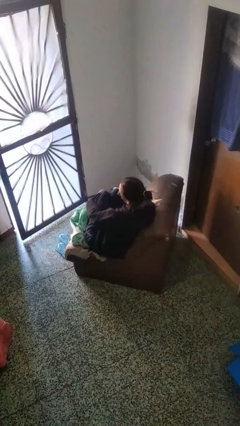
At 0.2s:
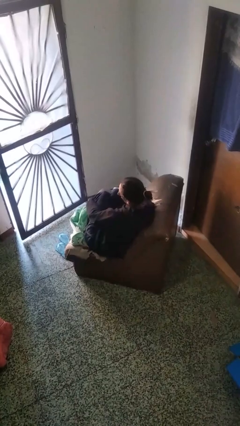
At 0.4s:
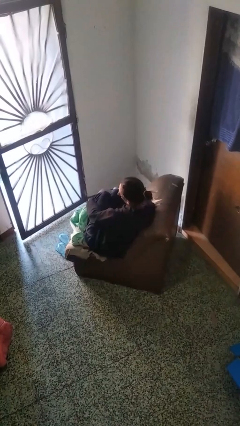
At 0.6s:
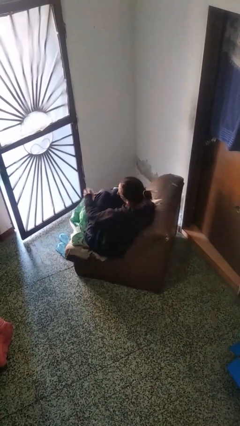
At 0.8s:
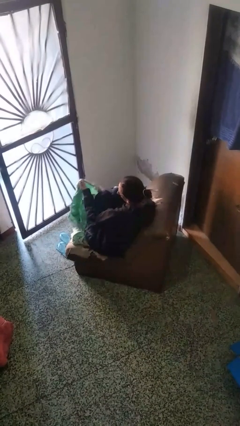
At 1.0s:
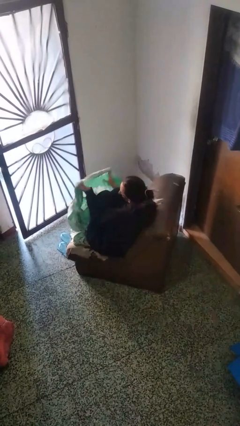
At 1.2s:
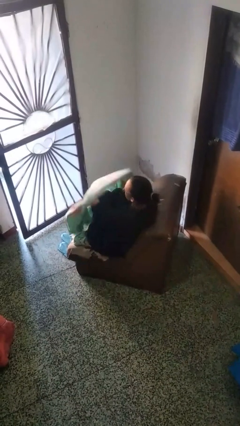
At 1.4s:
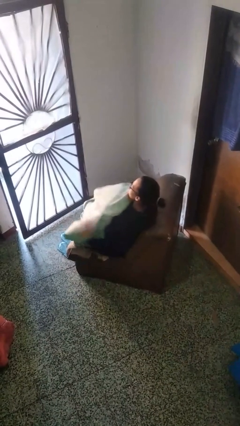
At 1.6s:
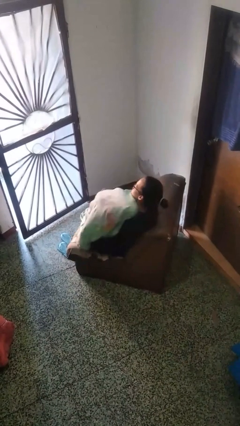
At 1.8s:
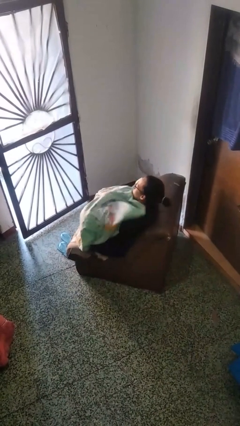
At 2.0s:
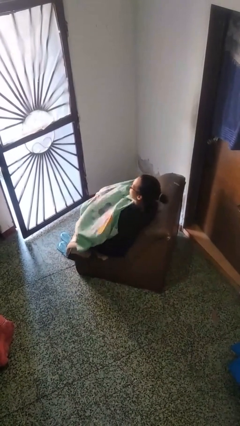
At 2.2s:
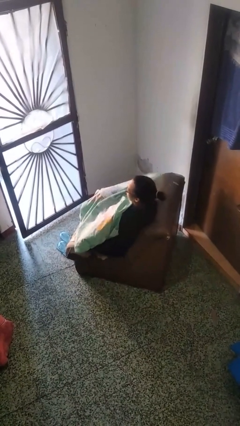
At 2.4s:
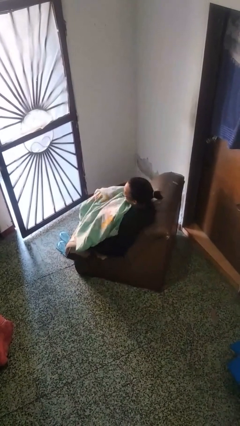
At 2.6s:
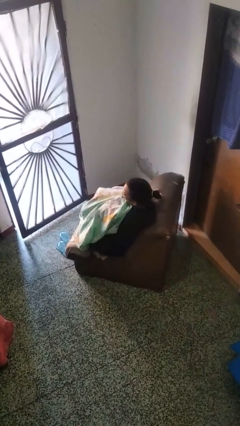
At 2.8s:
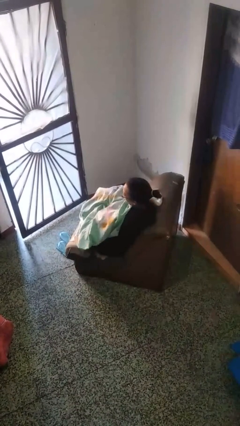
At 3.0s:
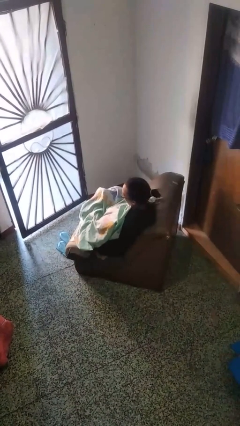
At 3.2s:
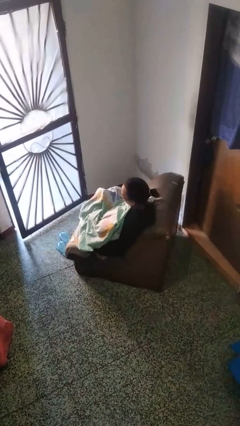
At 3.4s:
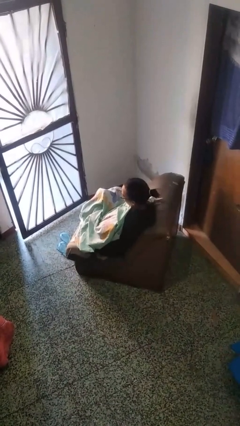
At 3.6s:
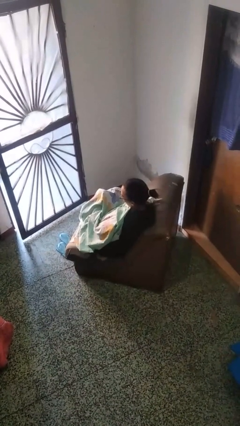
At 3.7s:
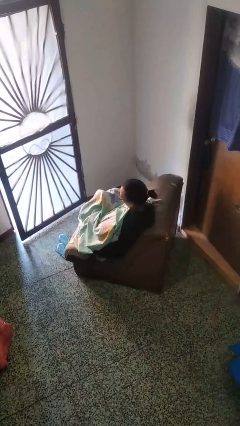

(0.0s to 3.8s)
person covers with blanket

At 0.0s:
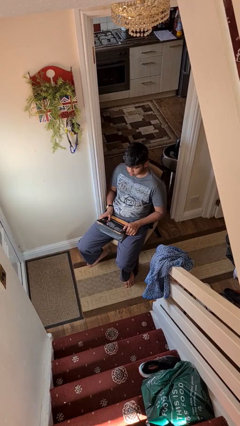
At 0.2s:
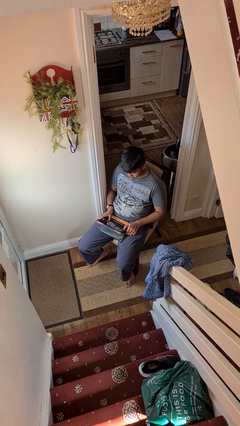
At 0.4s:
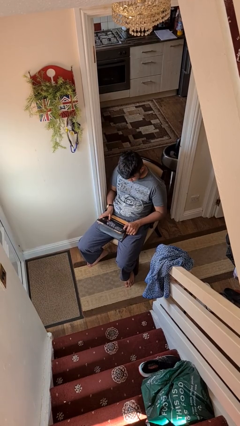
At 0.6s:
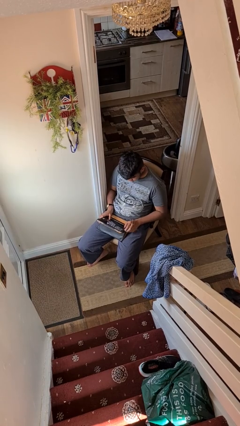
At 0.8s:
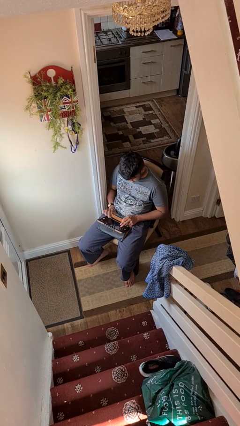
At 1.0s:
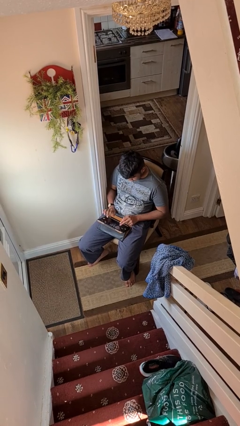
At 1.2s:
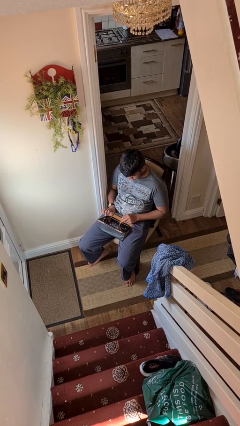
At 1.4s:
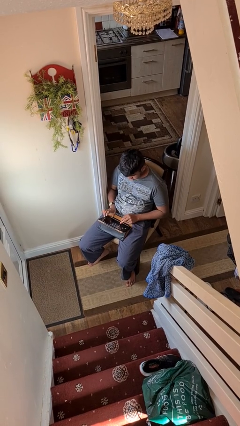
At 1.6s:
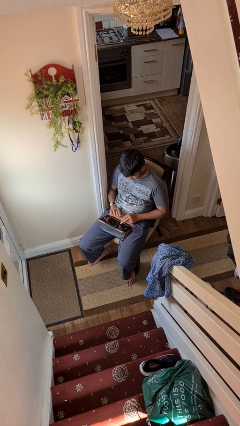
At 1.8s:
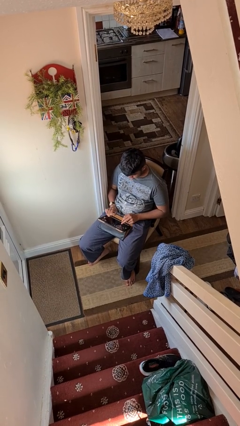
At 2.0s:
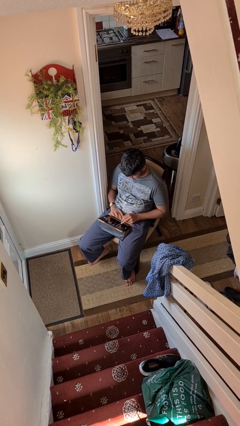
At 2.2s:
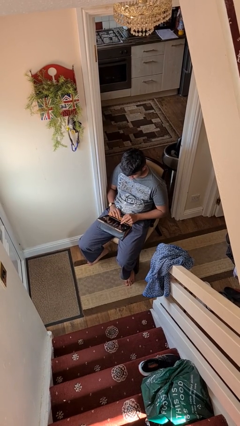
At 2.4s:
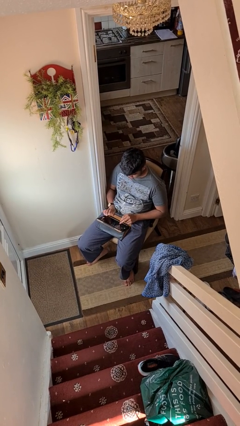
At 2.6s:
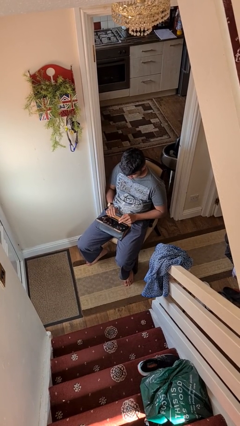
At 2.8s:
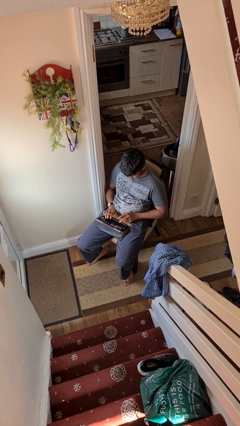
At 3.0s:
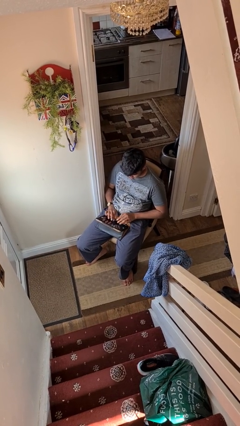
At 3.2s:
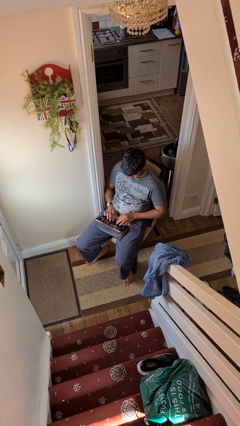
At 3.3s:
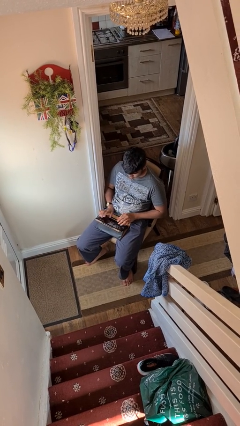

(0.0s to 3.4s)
person interacts with tablet

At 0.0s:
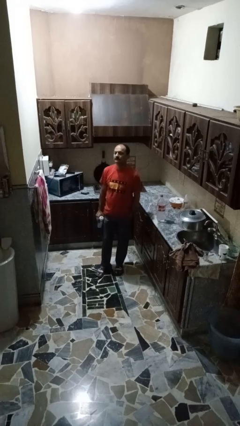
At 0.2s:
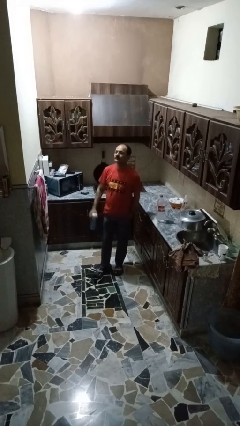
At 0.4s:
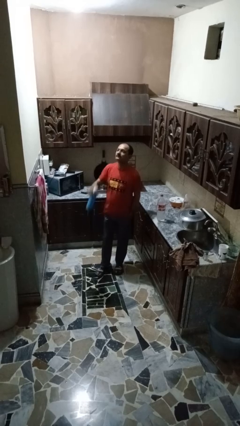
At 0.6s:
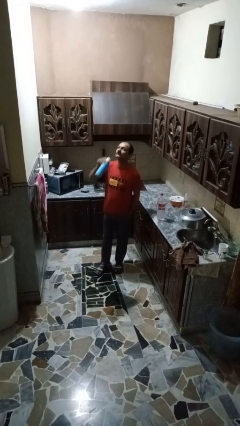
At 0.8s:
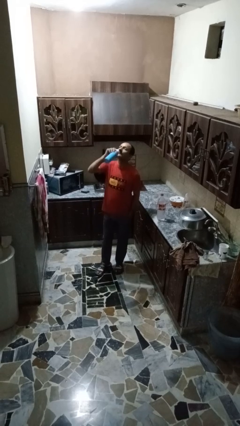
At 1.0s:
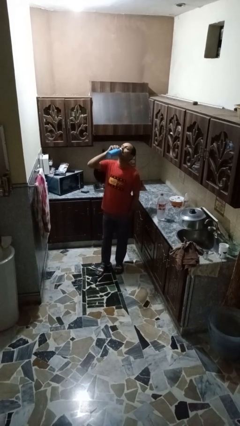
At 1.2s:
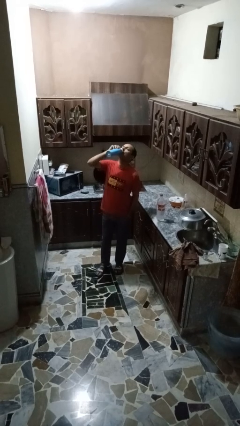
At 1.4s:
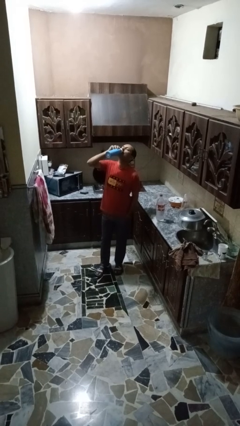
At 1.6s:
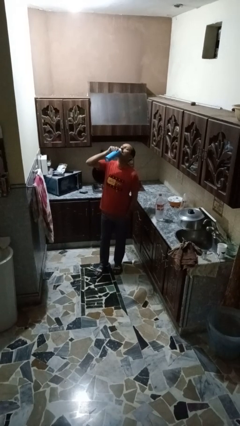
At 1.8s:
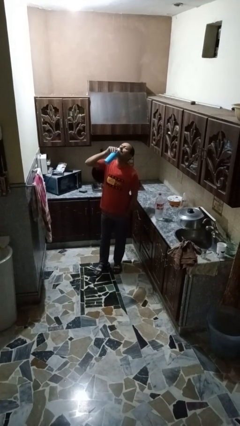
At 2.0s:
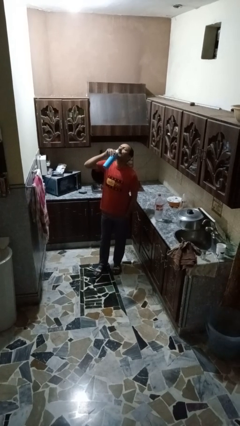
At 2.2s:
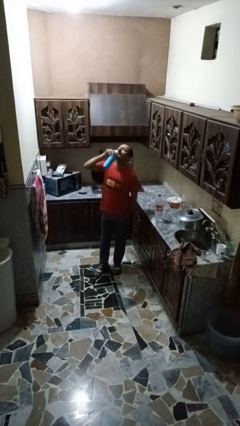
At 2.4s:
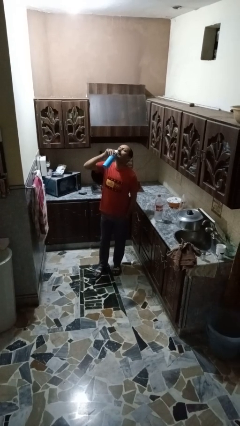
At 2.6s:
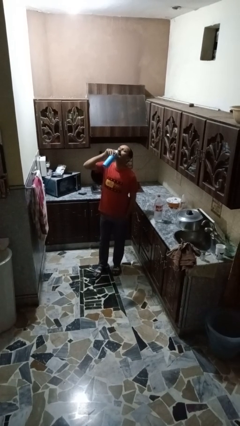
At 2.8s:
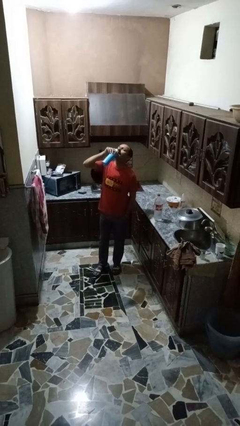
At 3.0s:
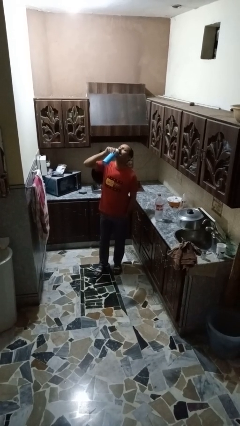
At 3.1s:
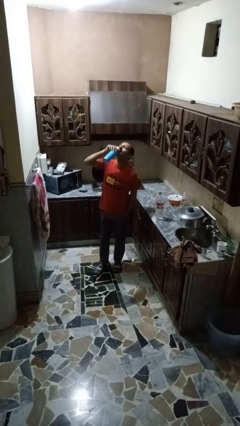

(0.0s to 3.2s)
person drinks from bottle

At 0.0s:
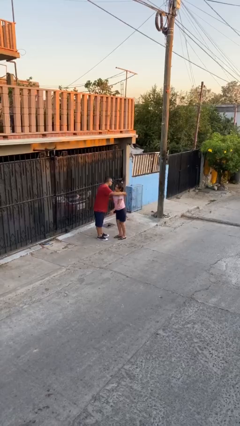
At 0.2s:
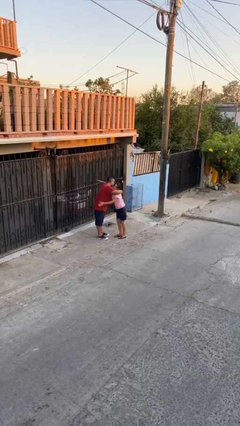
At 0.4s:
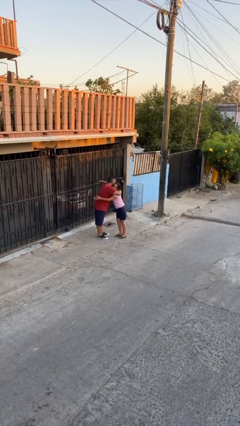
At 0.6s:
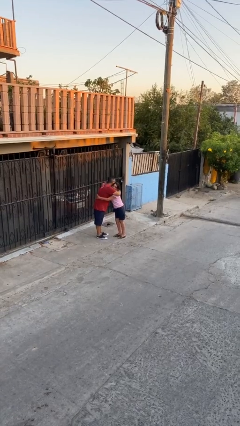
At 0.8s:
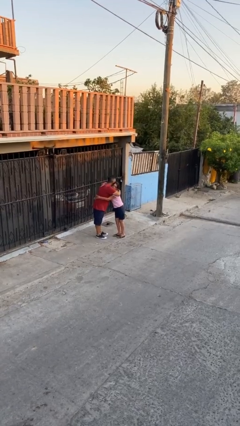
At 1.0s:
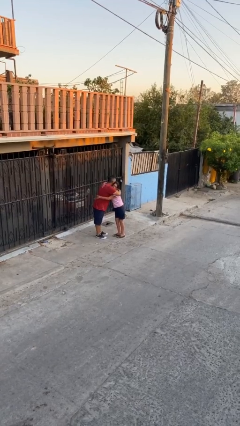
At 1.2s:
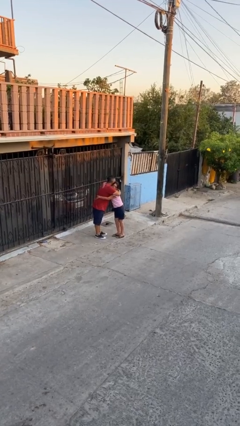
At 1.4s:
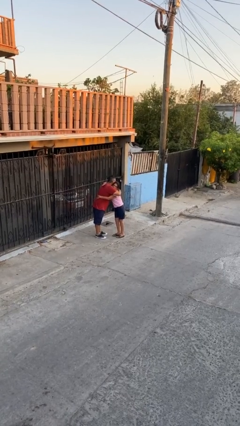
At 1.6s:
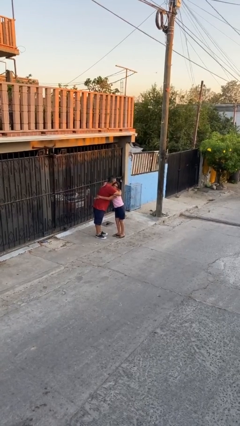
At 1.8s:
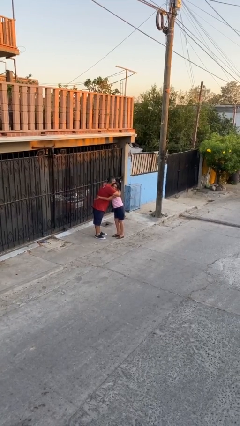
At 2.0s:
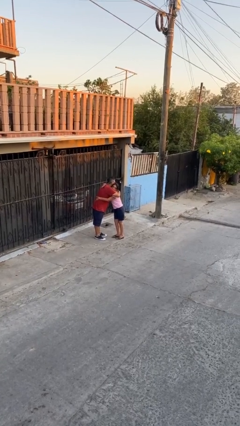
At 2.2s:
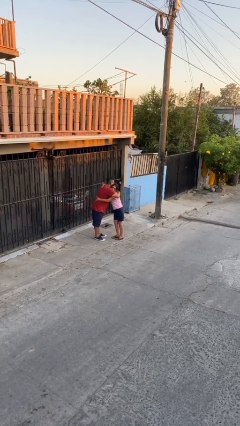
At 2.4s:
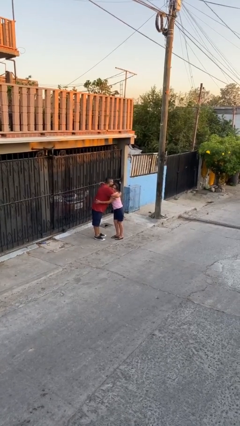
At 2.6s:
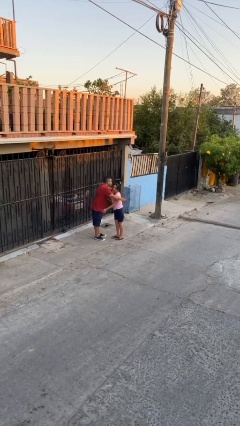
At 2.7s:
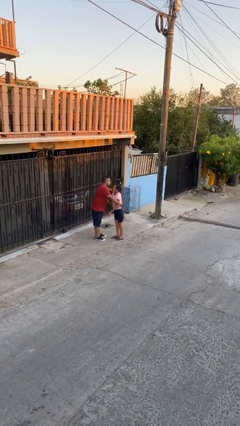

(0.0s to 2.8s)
person embraces person

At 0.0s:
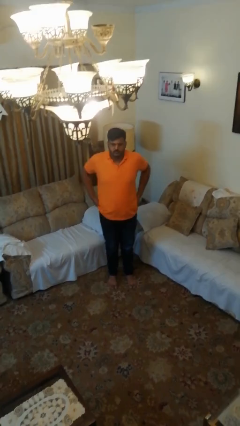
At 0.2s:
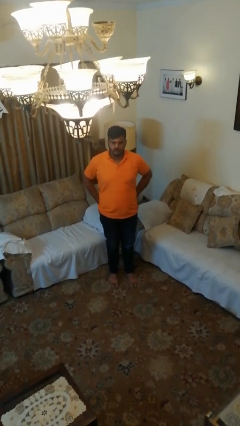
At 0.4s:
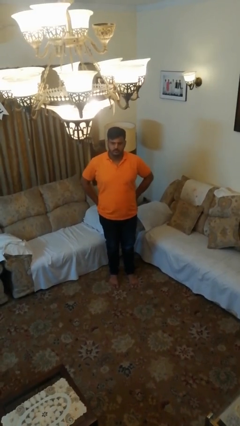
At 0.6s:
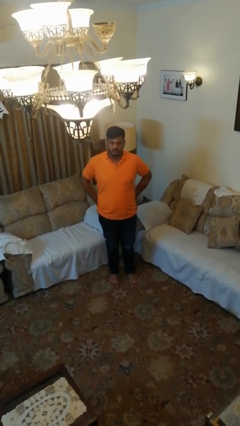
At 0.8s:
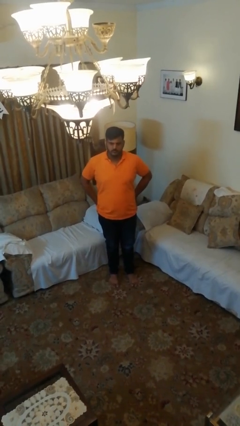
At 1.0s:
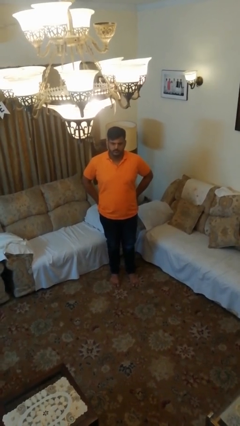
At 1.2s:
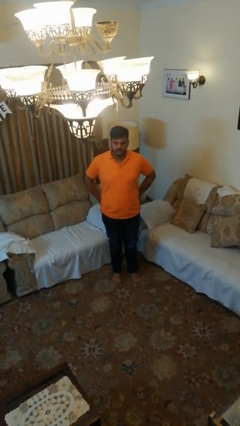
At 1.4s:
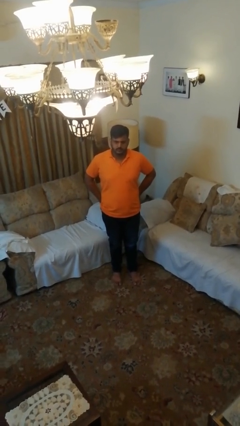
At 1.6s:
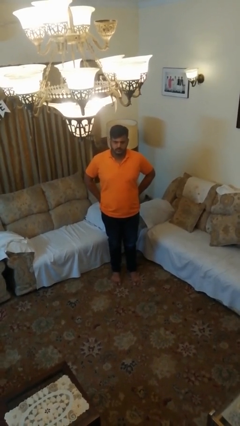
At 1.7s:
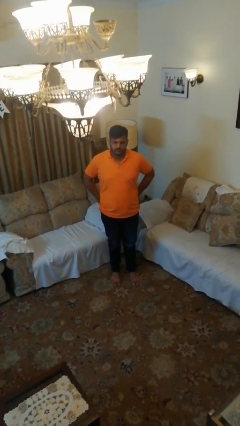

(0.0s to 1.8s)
person puts hands in back pockets

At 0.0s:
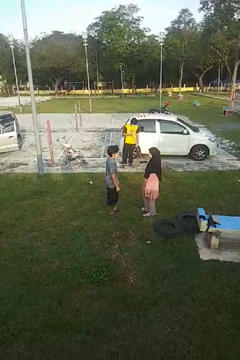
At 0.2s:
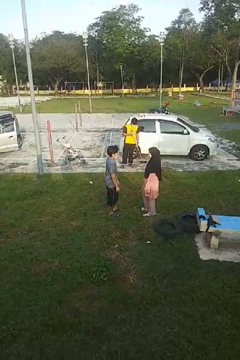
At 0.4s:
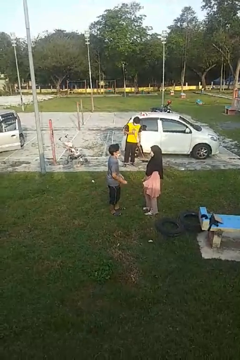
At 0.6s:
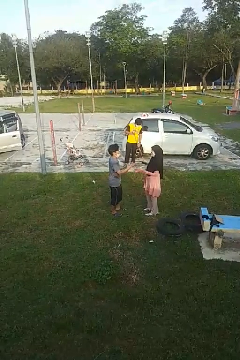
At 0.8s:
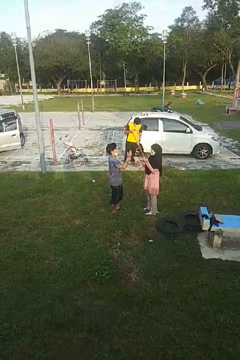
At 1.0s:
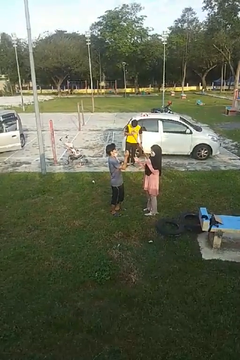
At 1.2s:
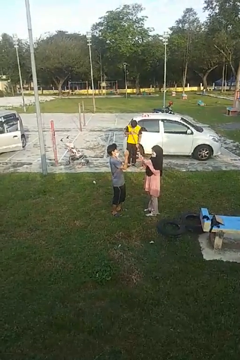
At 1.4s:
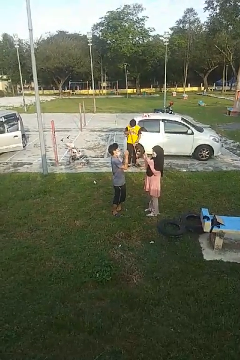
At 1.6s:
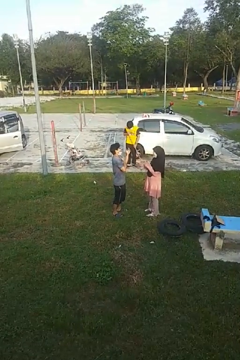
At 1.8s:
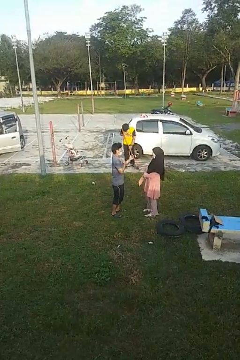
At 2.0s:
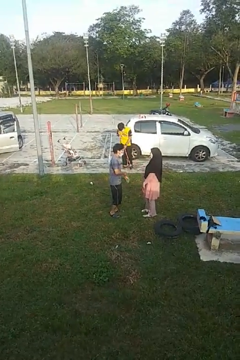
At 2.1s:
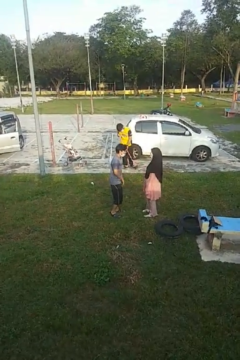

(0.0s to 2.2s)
person laughs with person

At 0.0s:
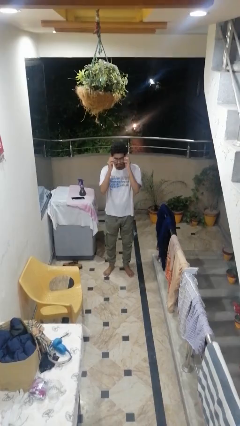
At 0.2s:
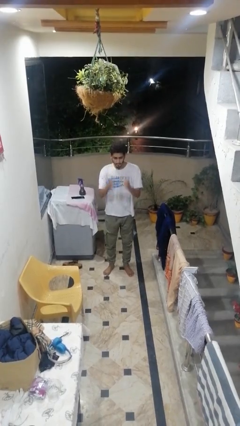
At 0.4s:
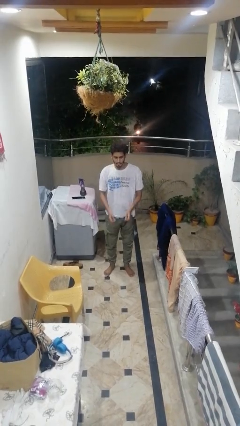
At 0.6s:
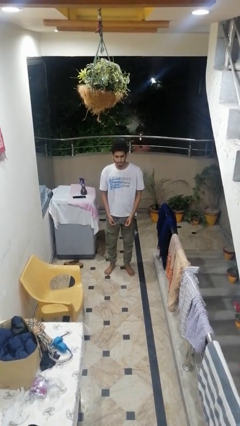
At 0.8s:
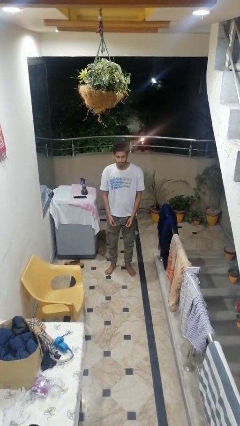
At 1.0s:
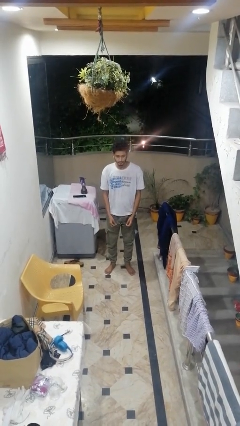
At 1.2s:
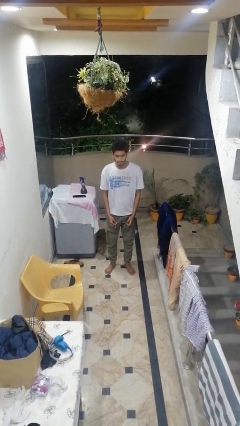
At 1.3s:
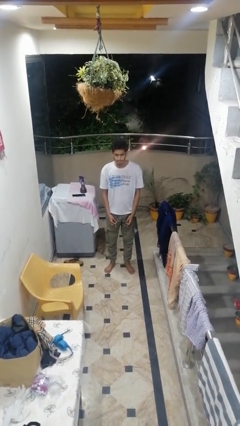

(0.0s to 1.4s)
person takes off glasses
